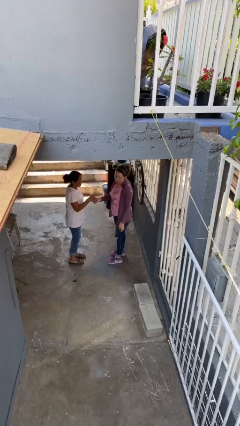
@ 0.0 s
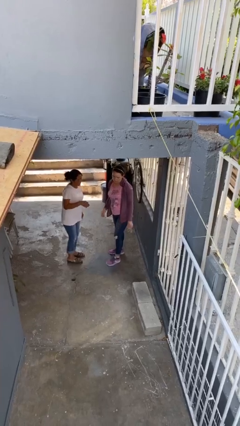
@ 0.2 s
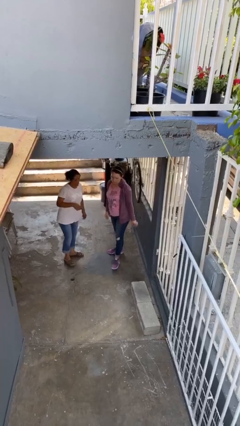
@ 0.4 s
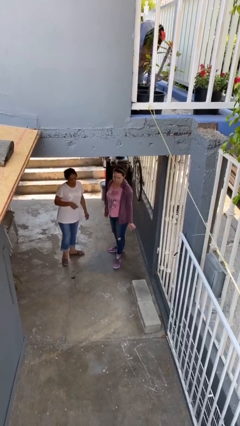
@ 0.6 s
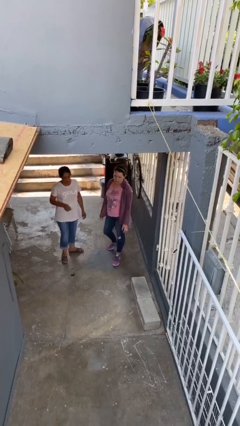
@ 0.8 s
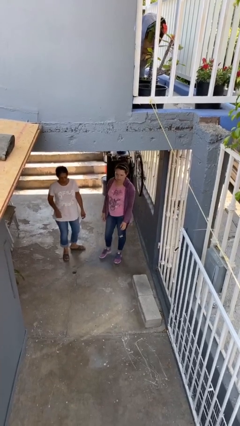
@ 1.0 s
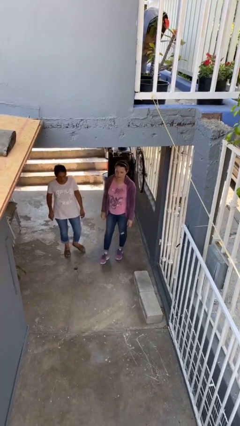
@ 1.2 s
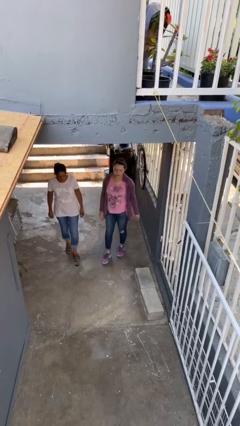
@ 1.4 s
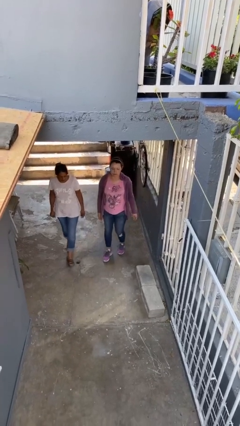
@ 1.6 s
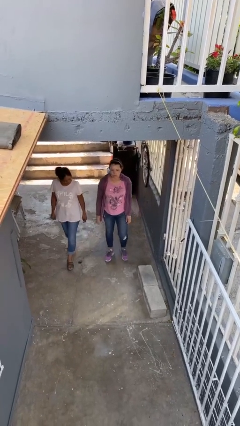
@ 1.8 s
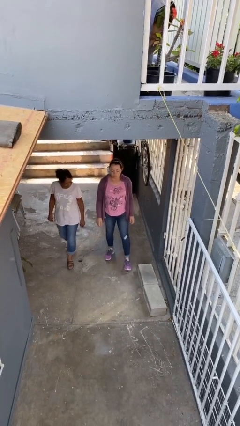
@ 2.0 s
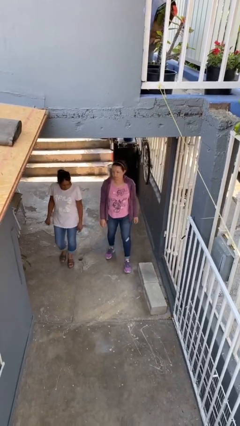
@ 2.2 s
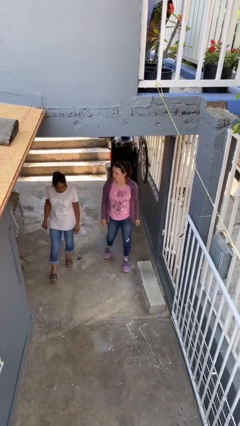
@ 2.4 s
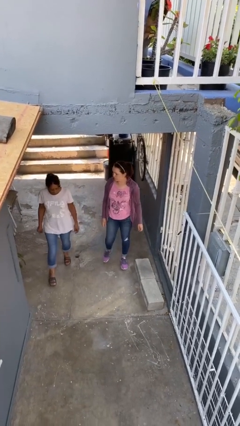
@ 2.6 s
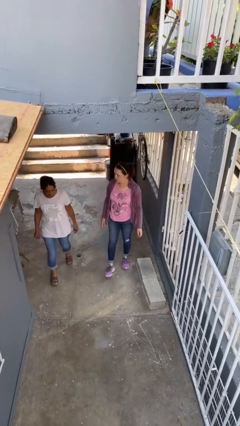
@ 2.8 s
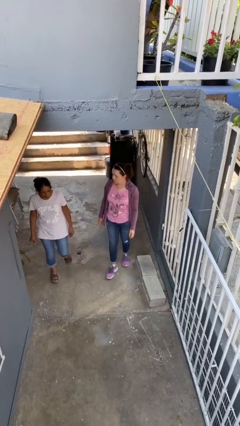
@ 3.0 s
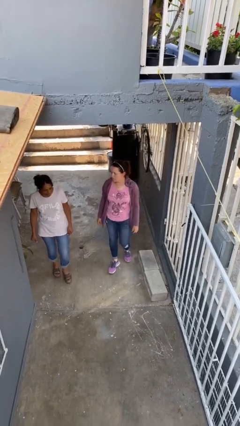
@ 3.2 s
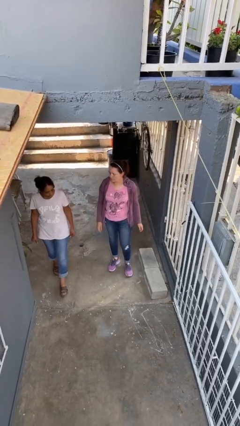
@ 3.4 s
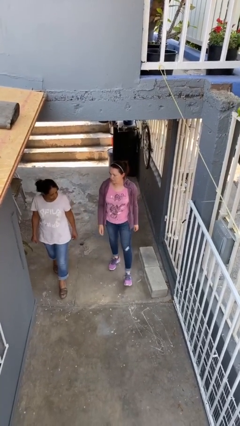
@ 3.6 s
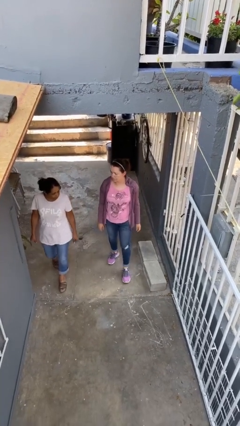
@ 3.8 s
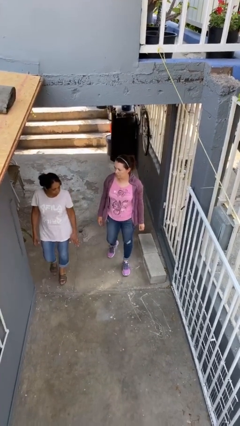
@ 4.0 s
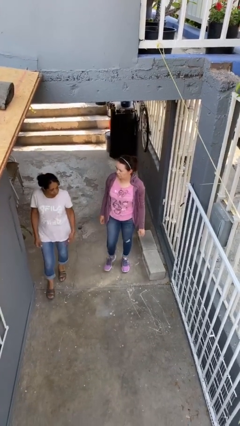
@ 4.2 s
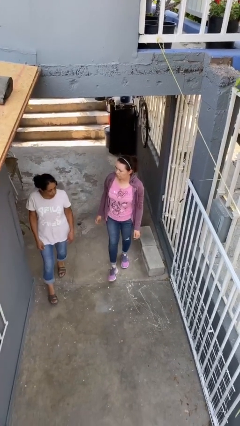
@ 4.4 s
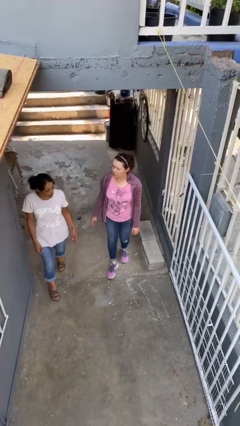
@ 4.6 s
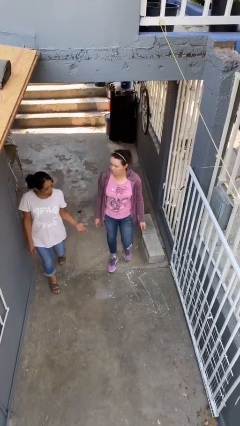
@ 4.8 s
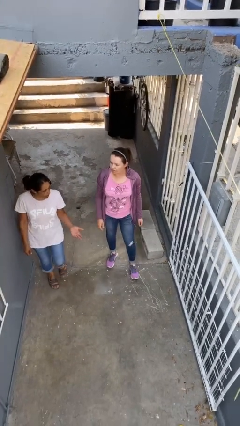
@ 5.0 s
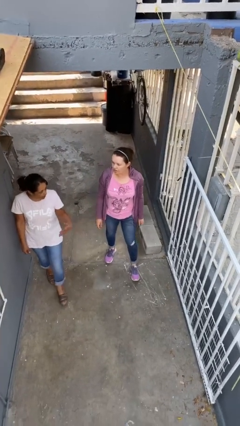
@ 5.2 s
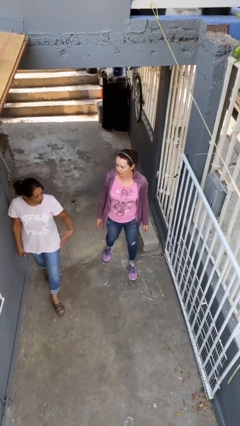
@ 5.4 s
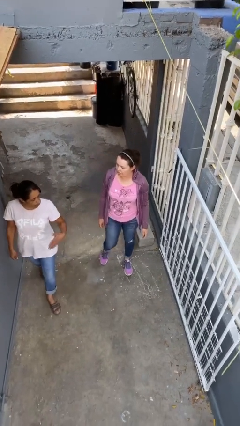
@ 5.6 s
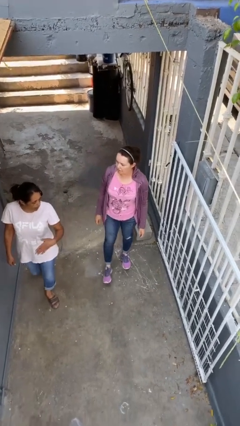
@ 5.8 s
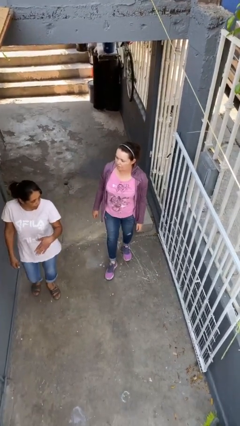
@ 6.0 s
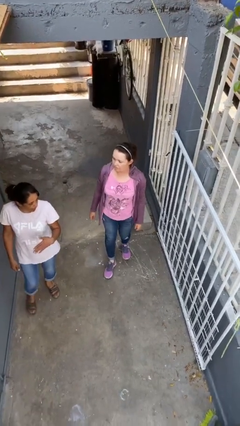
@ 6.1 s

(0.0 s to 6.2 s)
person talks to person

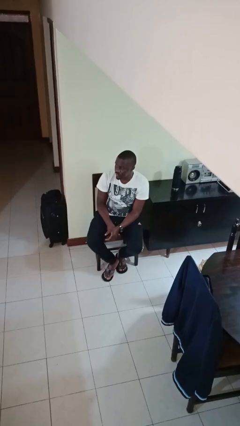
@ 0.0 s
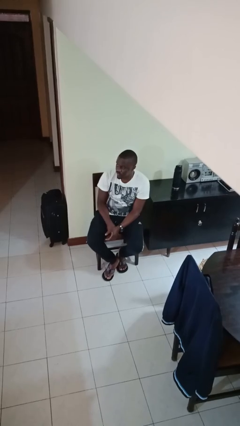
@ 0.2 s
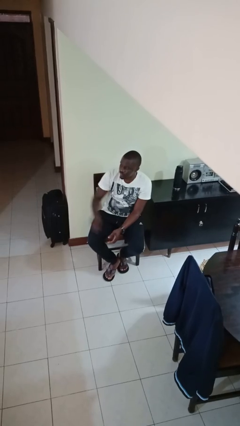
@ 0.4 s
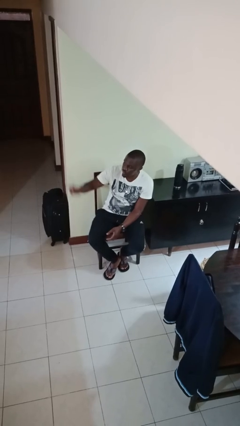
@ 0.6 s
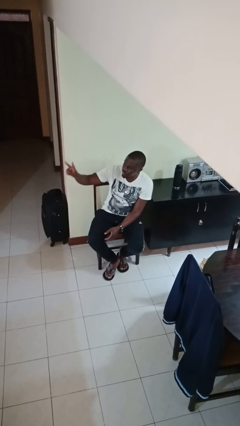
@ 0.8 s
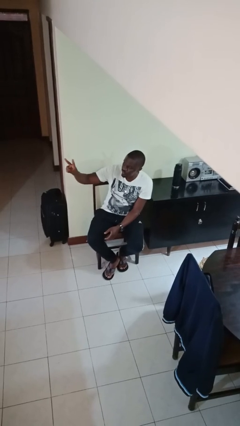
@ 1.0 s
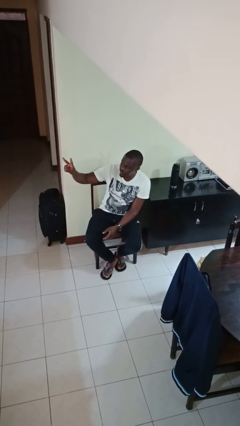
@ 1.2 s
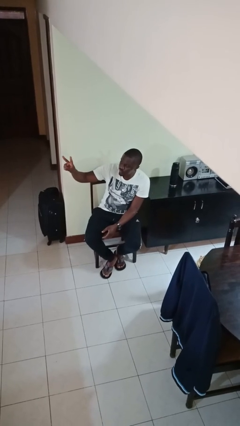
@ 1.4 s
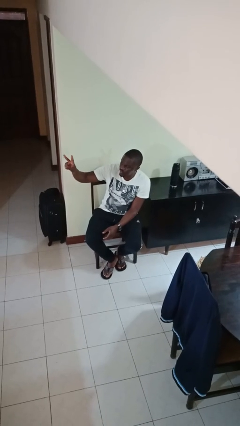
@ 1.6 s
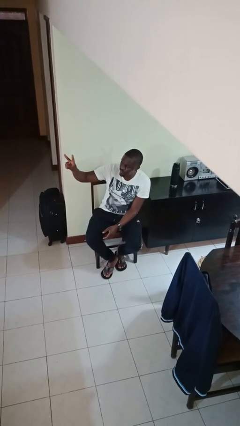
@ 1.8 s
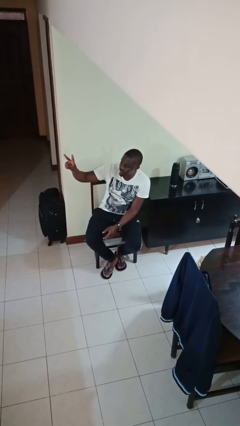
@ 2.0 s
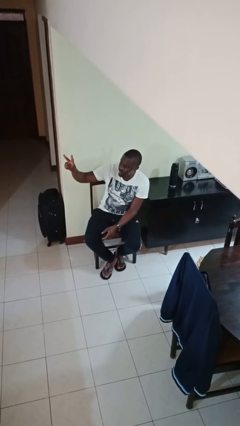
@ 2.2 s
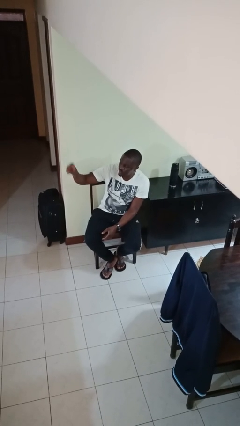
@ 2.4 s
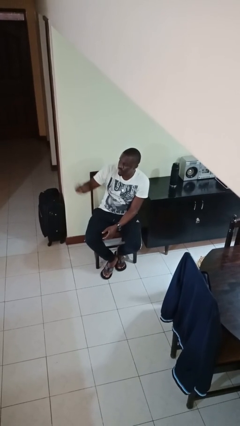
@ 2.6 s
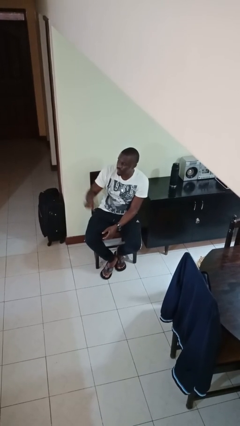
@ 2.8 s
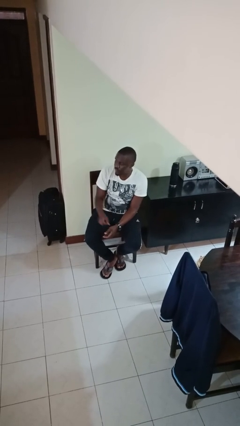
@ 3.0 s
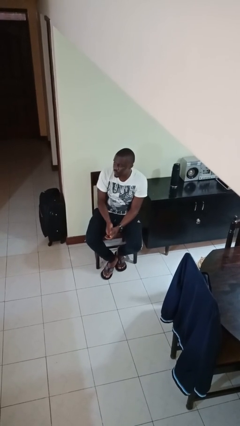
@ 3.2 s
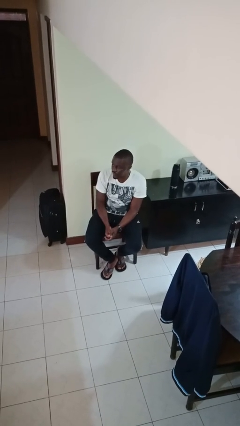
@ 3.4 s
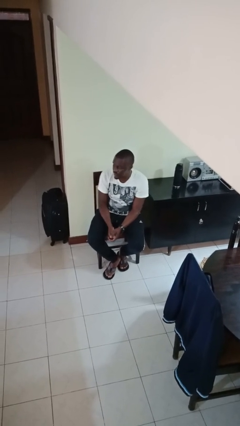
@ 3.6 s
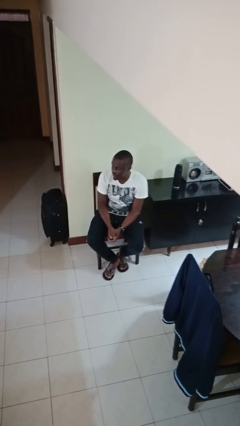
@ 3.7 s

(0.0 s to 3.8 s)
person gestures peace

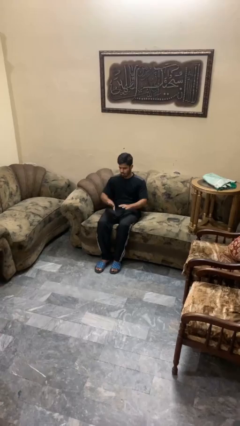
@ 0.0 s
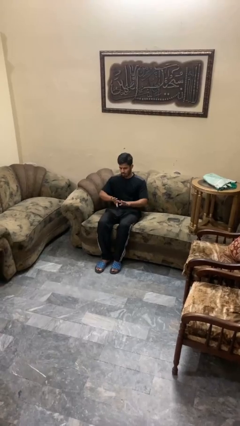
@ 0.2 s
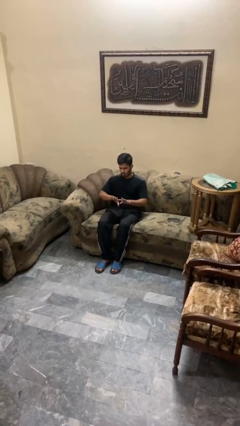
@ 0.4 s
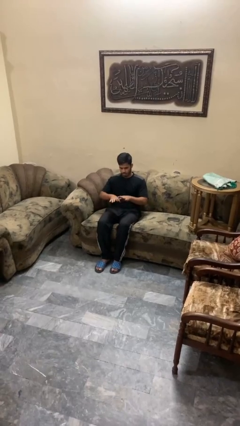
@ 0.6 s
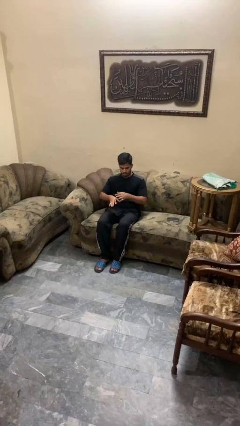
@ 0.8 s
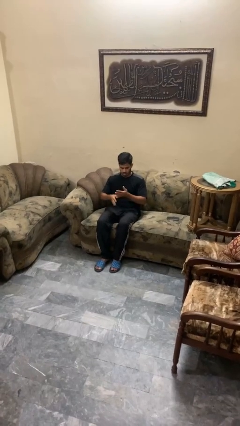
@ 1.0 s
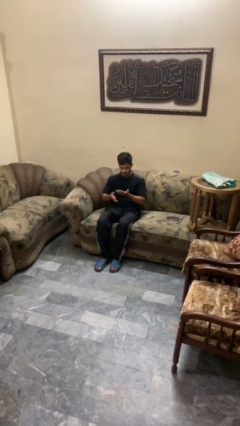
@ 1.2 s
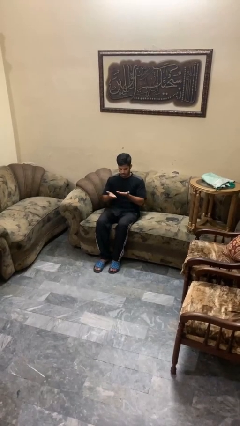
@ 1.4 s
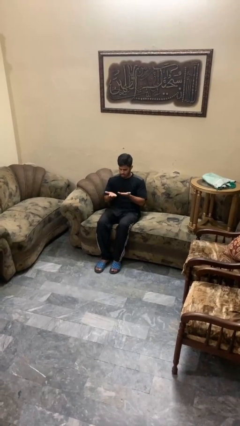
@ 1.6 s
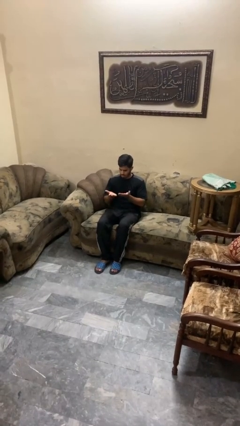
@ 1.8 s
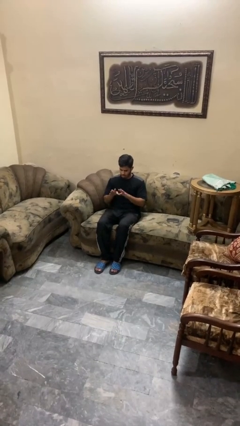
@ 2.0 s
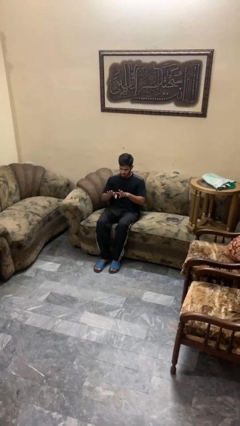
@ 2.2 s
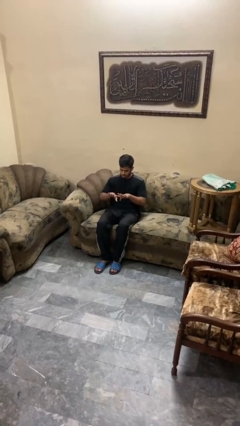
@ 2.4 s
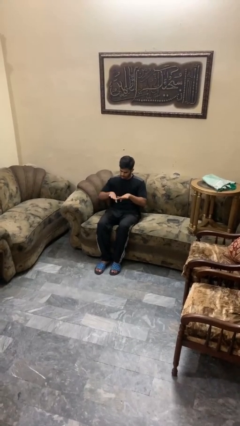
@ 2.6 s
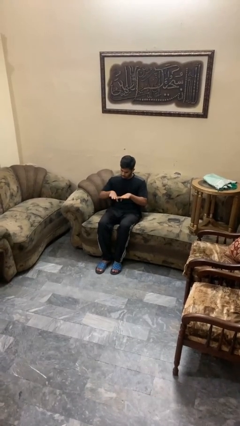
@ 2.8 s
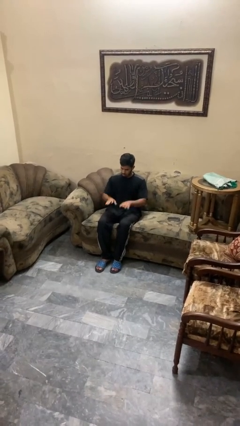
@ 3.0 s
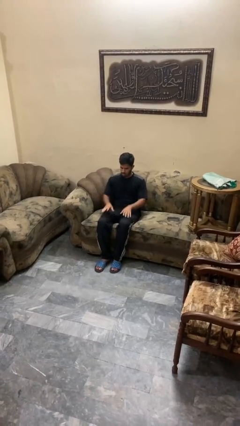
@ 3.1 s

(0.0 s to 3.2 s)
person looks at hands in lap

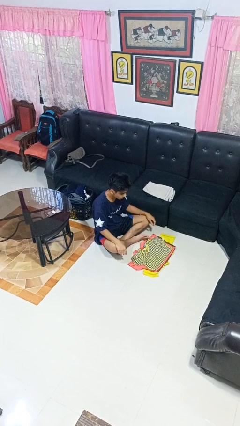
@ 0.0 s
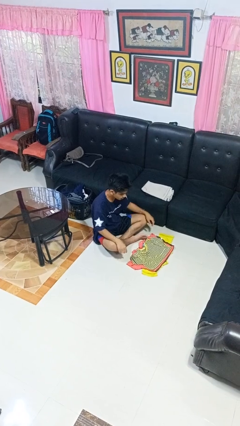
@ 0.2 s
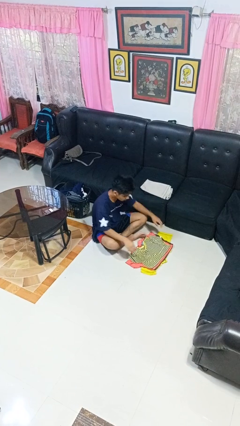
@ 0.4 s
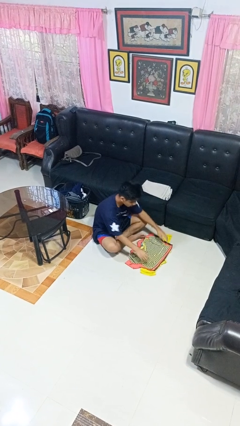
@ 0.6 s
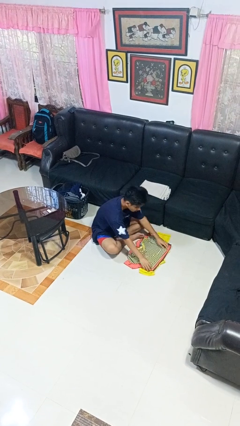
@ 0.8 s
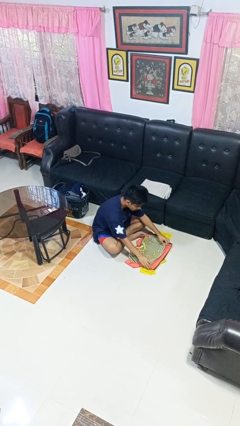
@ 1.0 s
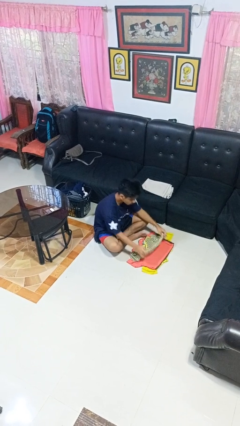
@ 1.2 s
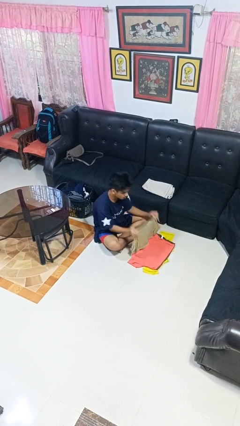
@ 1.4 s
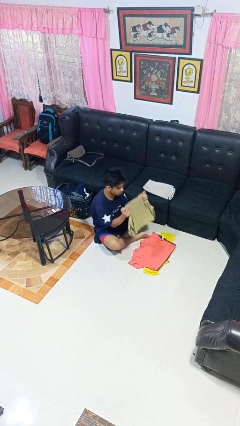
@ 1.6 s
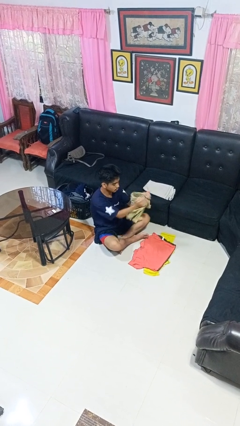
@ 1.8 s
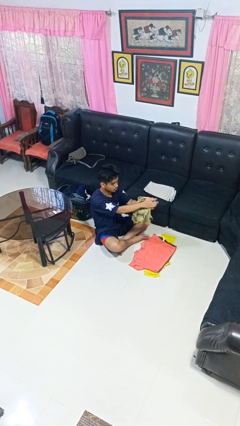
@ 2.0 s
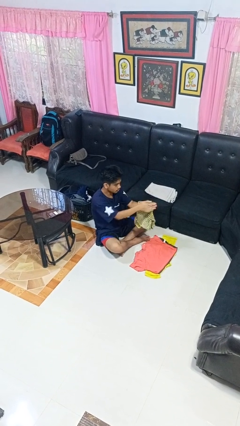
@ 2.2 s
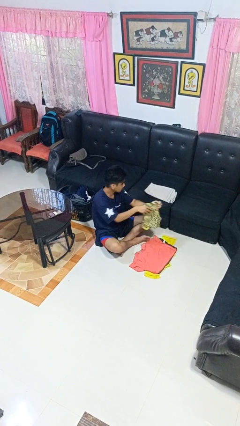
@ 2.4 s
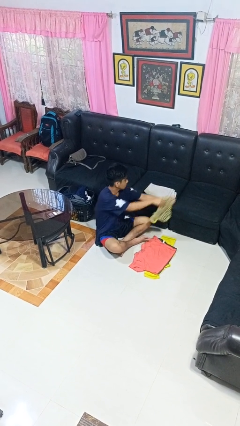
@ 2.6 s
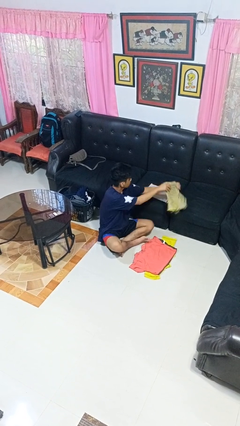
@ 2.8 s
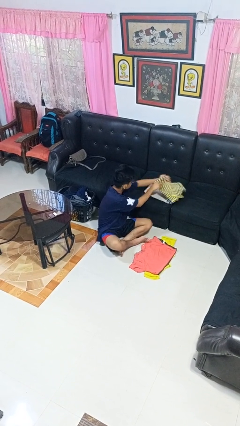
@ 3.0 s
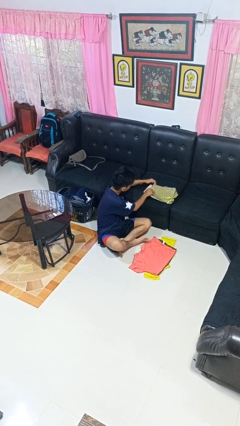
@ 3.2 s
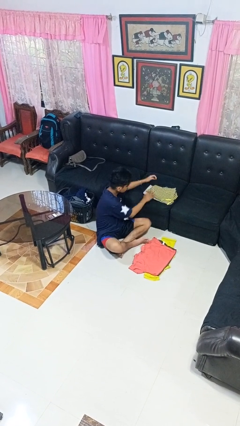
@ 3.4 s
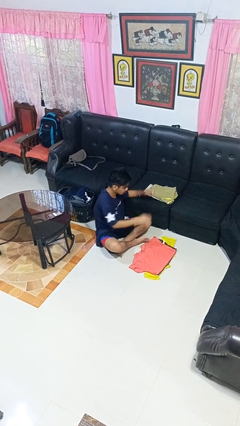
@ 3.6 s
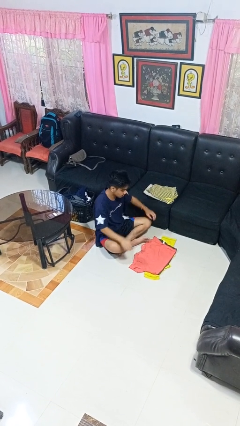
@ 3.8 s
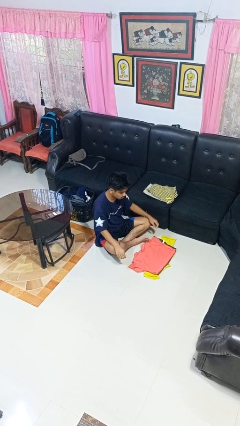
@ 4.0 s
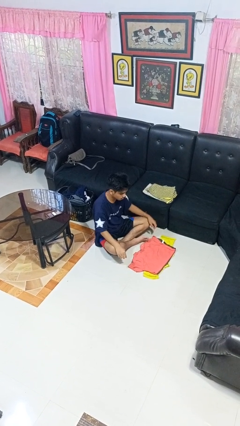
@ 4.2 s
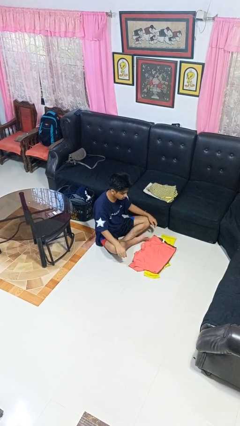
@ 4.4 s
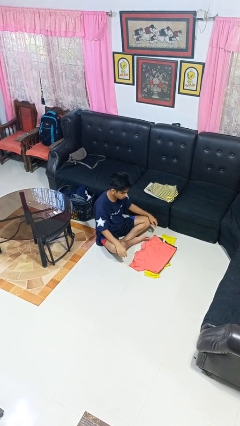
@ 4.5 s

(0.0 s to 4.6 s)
person folds shirt
